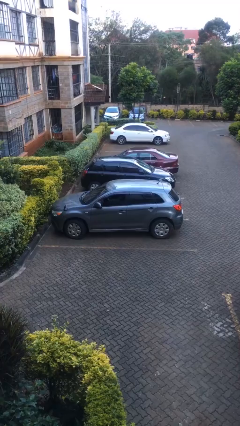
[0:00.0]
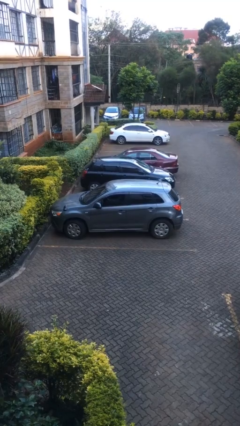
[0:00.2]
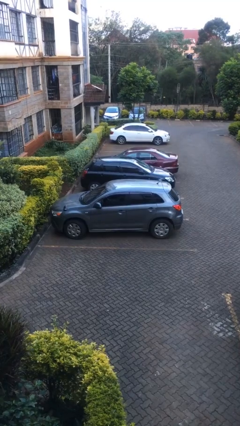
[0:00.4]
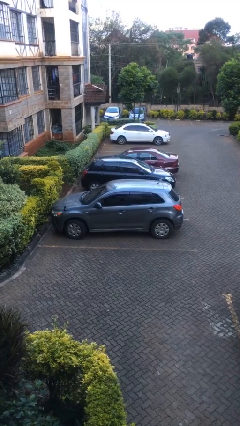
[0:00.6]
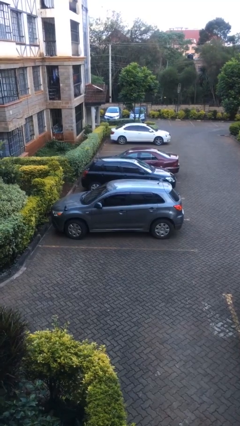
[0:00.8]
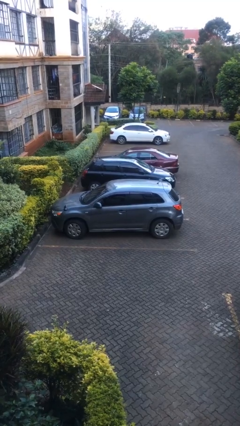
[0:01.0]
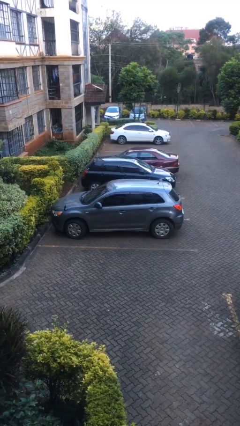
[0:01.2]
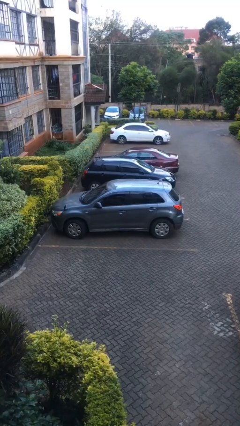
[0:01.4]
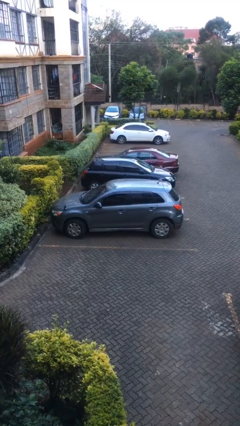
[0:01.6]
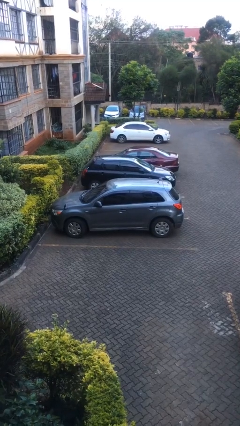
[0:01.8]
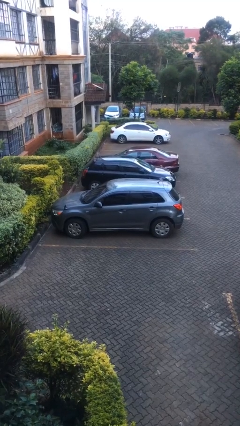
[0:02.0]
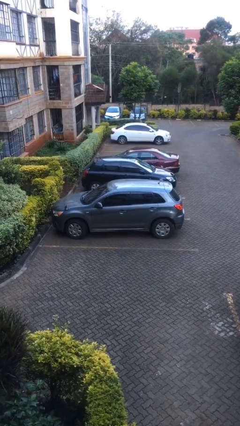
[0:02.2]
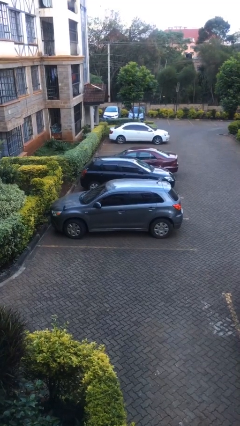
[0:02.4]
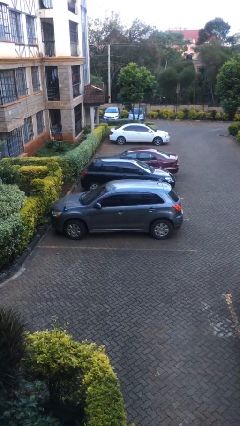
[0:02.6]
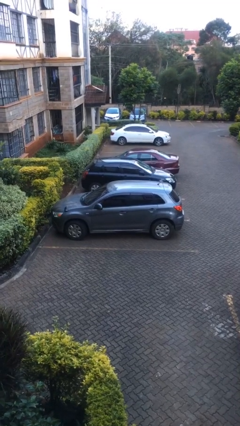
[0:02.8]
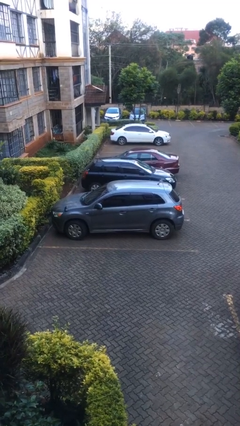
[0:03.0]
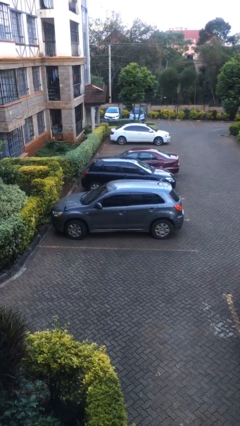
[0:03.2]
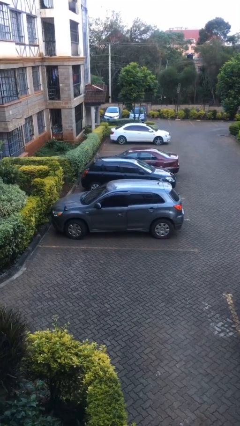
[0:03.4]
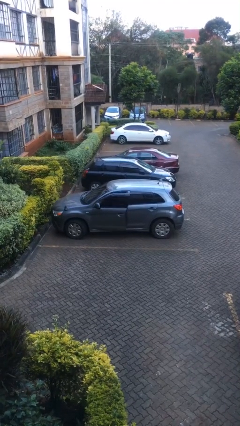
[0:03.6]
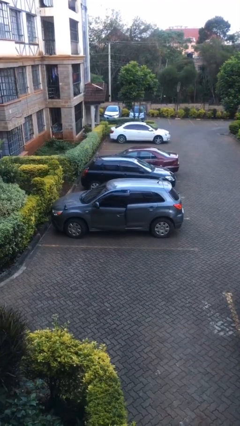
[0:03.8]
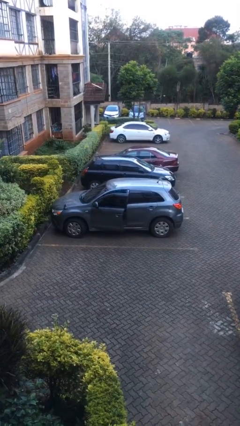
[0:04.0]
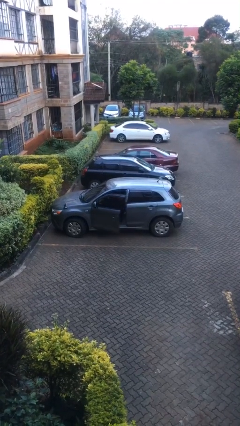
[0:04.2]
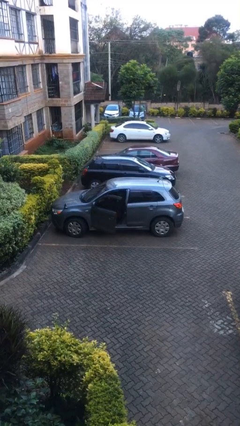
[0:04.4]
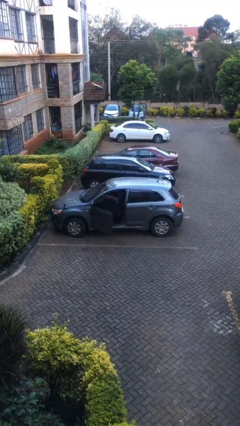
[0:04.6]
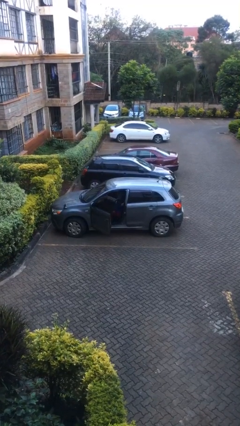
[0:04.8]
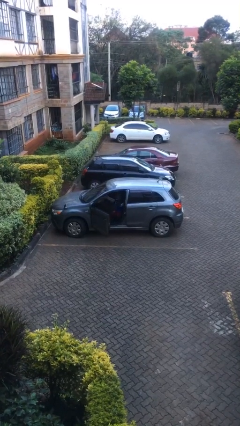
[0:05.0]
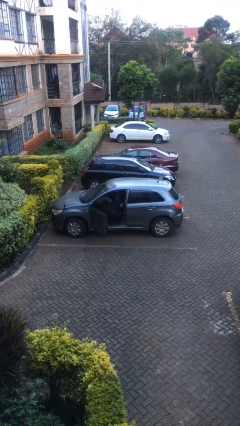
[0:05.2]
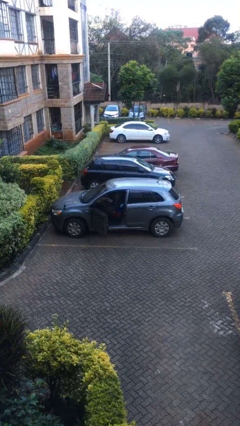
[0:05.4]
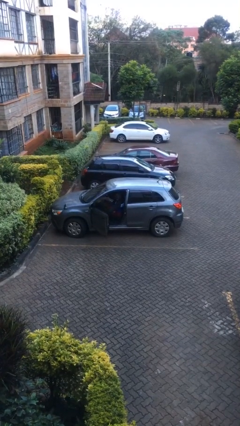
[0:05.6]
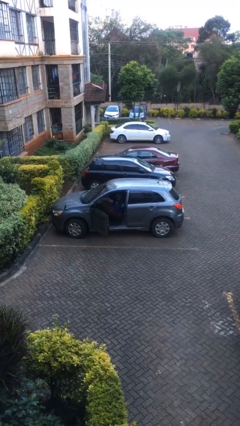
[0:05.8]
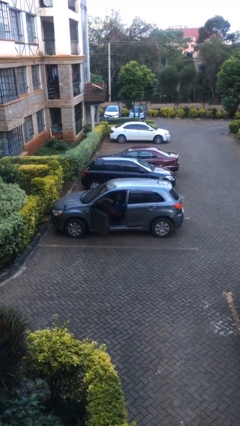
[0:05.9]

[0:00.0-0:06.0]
person opens car door

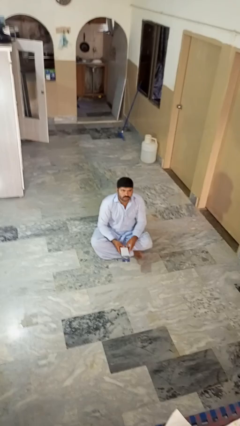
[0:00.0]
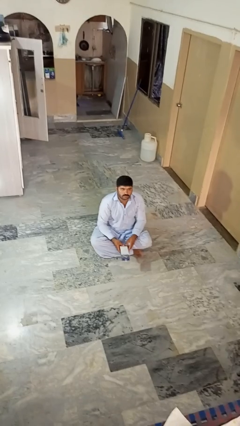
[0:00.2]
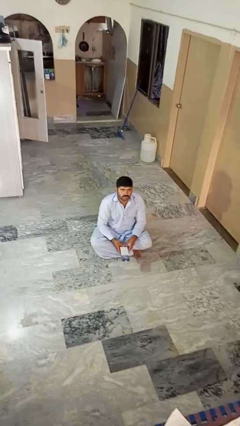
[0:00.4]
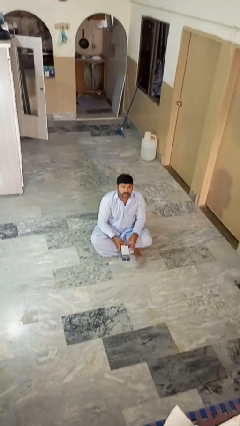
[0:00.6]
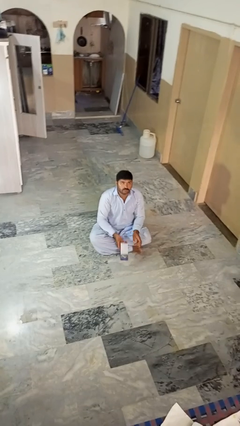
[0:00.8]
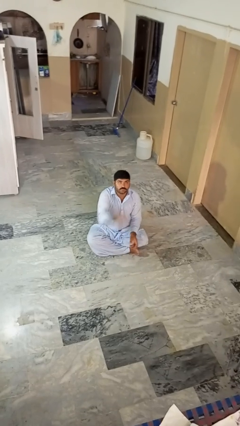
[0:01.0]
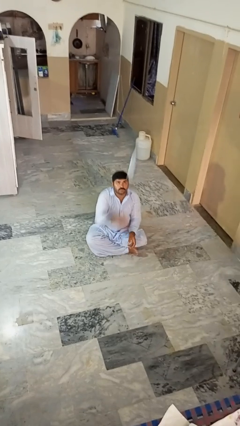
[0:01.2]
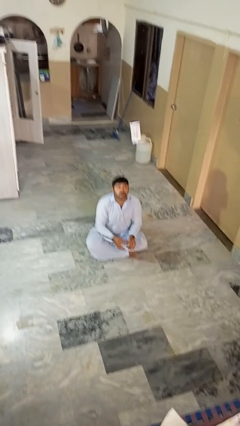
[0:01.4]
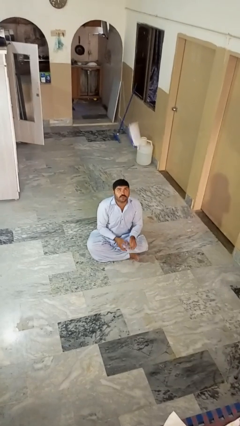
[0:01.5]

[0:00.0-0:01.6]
person drops object

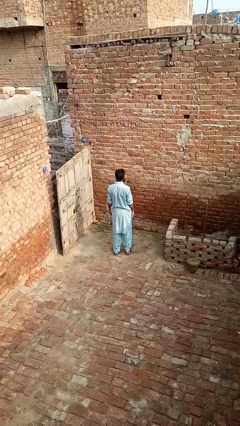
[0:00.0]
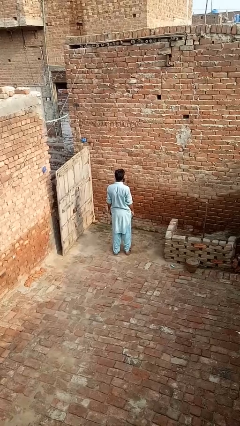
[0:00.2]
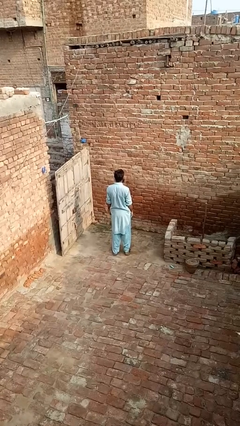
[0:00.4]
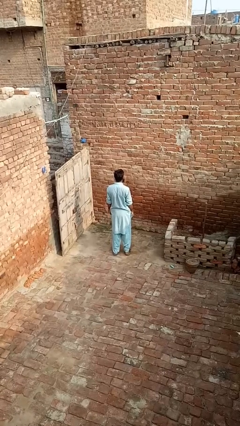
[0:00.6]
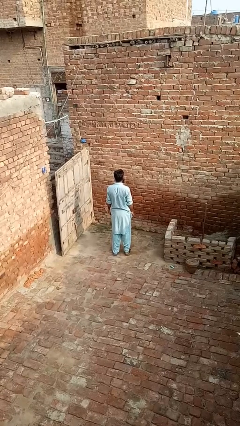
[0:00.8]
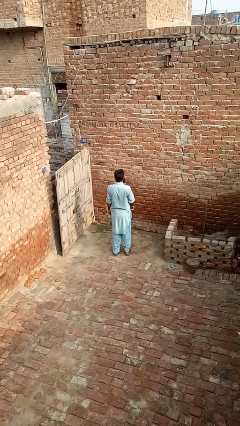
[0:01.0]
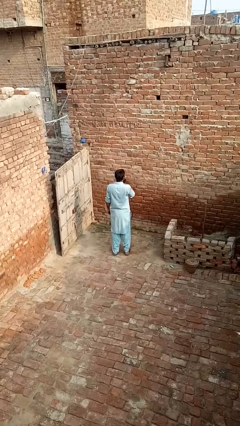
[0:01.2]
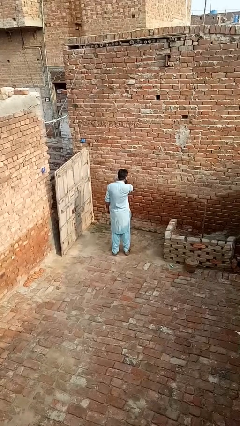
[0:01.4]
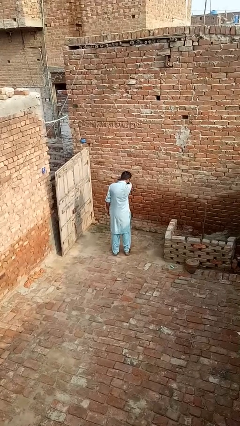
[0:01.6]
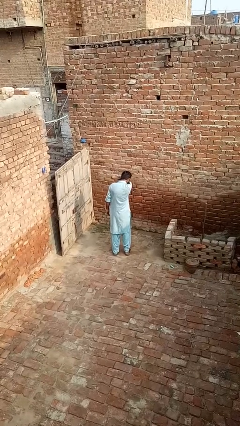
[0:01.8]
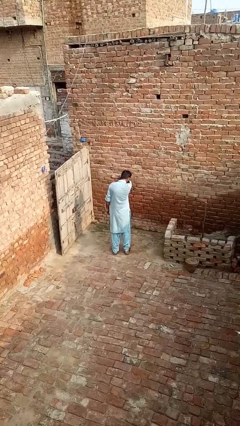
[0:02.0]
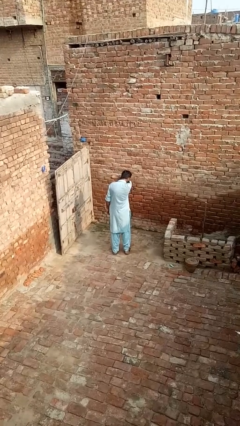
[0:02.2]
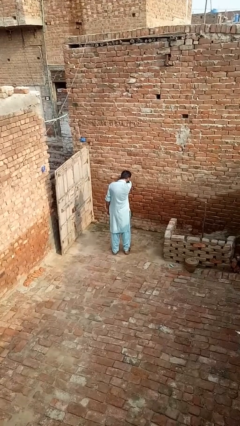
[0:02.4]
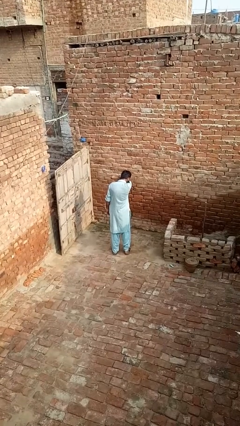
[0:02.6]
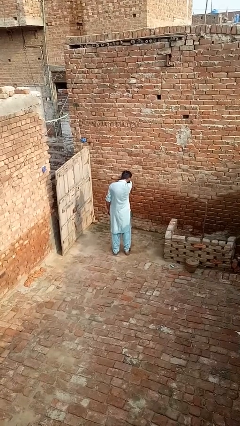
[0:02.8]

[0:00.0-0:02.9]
person sneezes into arm

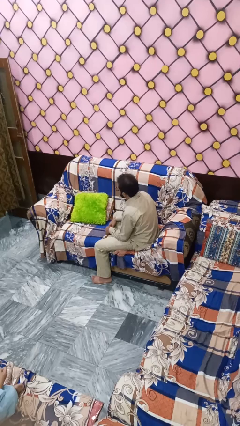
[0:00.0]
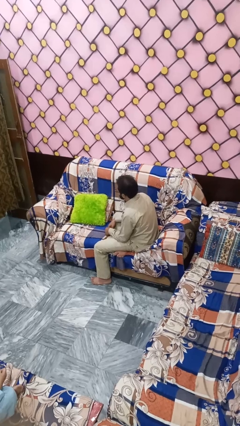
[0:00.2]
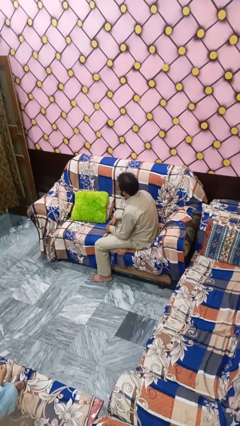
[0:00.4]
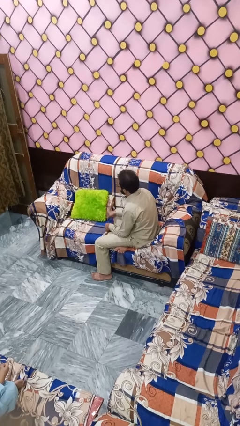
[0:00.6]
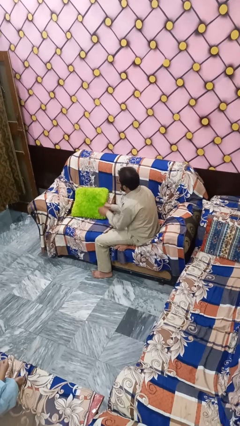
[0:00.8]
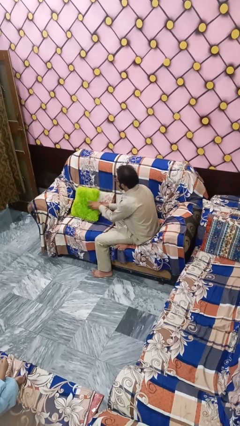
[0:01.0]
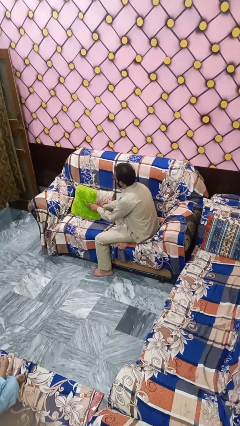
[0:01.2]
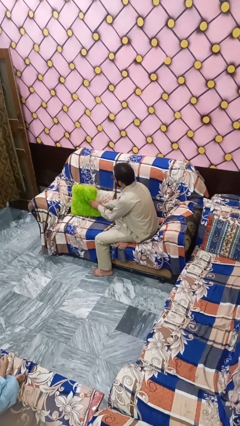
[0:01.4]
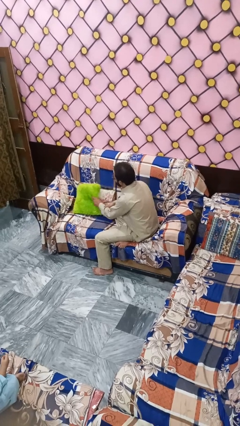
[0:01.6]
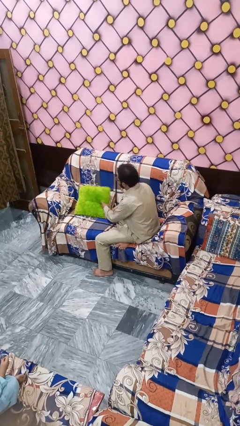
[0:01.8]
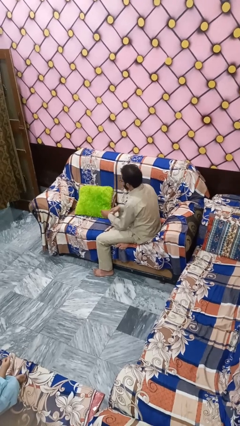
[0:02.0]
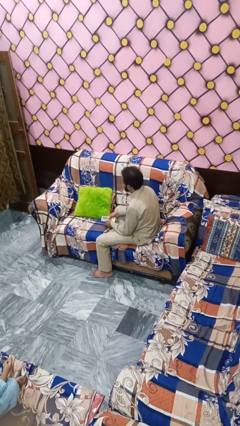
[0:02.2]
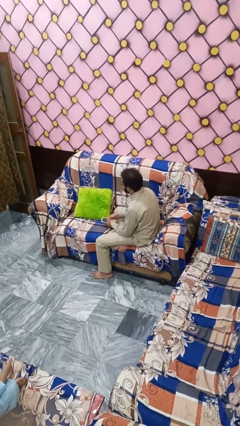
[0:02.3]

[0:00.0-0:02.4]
person searches in couch

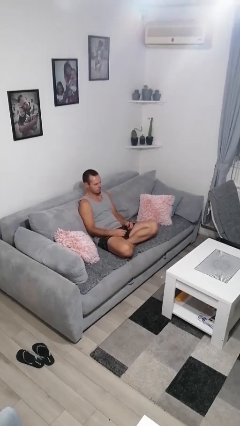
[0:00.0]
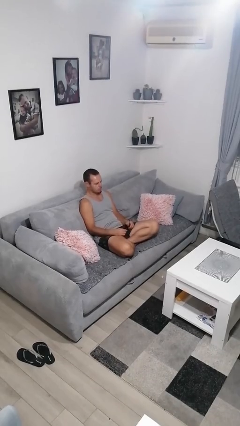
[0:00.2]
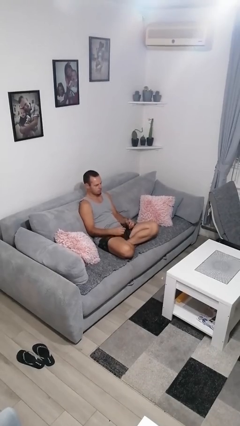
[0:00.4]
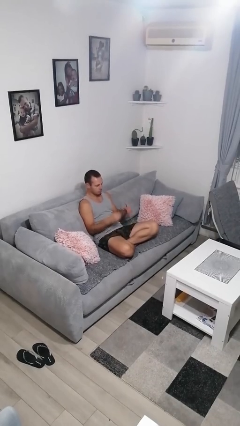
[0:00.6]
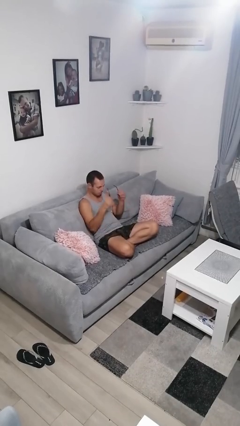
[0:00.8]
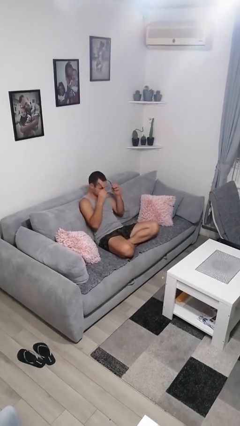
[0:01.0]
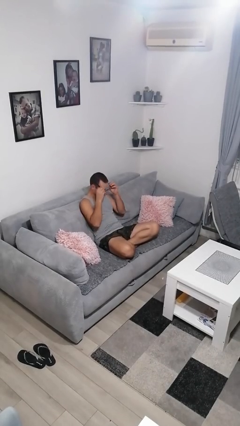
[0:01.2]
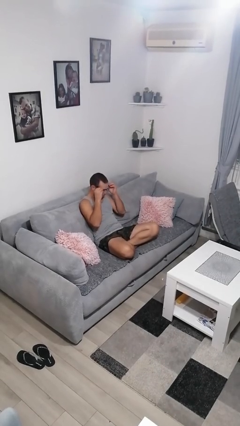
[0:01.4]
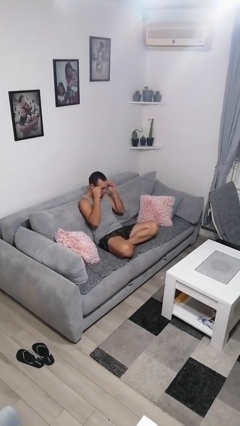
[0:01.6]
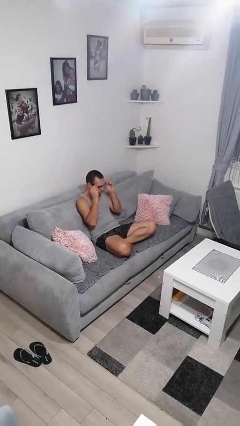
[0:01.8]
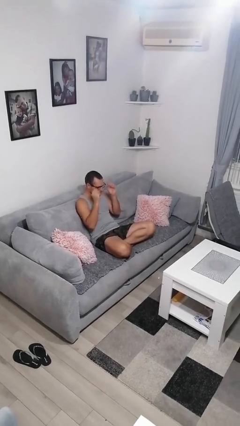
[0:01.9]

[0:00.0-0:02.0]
person puts on glasses

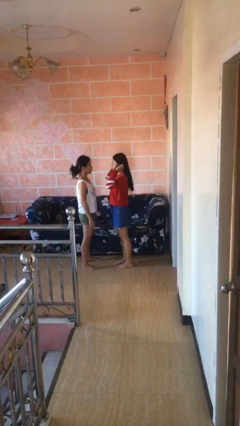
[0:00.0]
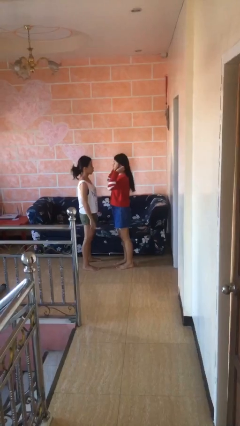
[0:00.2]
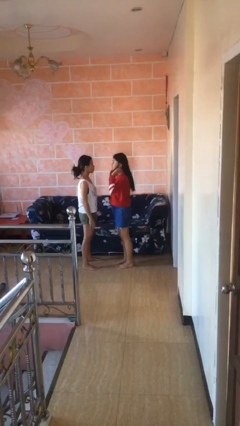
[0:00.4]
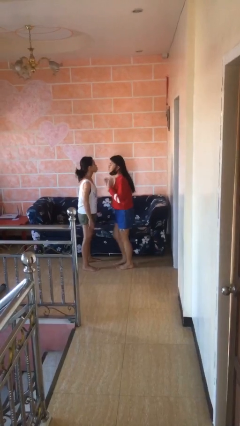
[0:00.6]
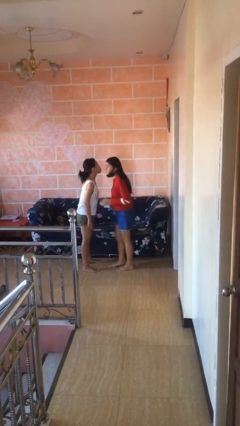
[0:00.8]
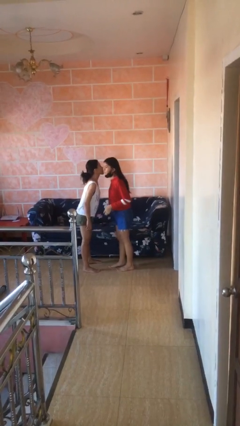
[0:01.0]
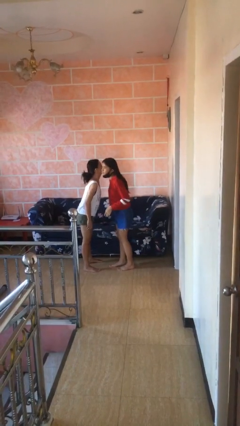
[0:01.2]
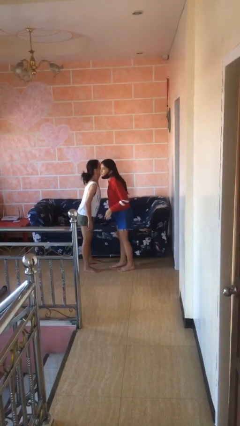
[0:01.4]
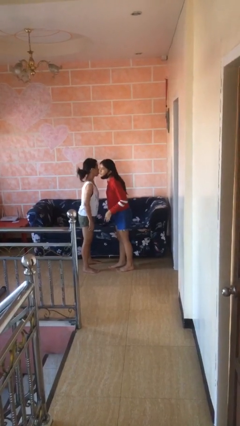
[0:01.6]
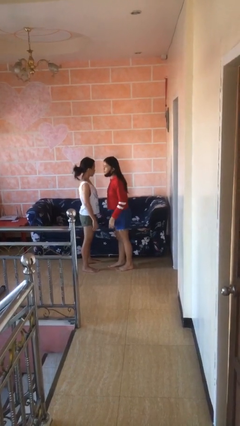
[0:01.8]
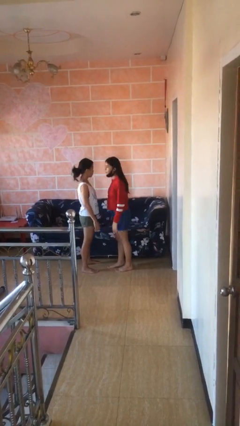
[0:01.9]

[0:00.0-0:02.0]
person kisses cheek of person

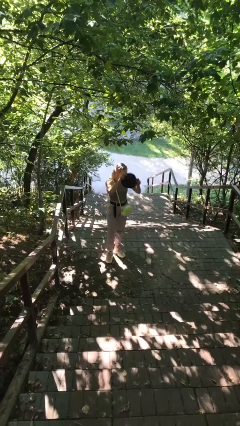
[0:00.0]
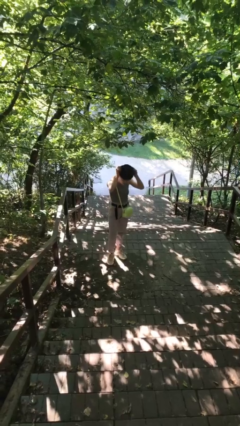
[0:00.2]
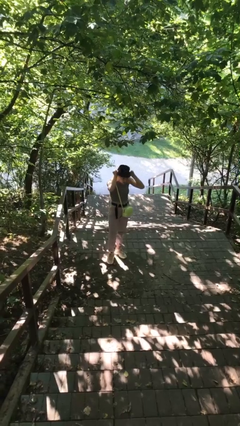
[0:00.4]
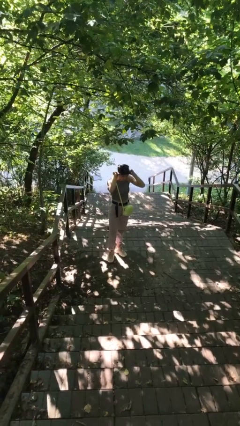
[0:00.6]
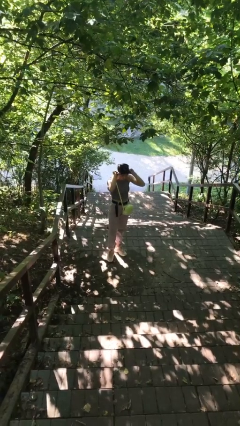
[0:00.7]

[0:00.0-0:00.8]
person puts on hat
